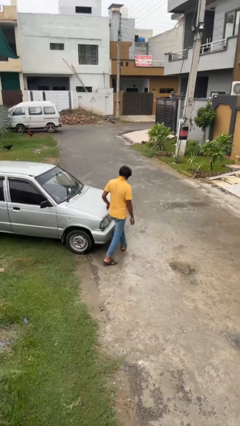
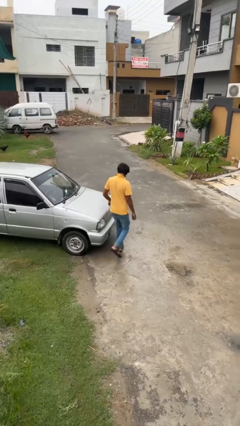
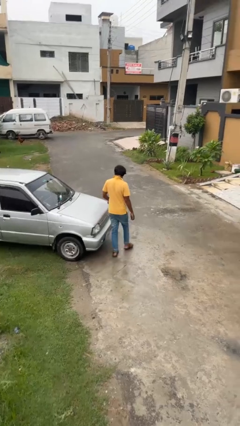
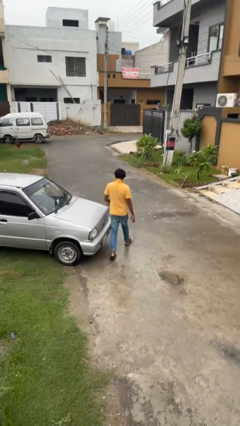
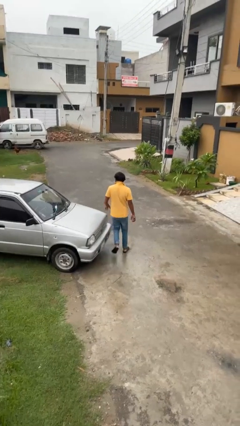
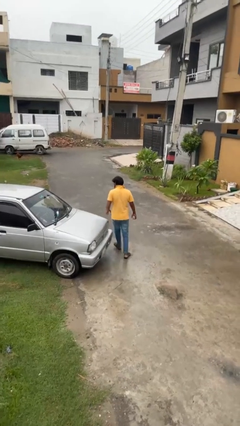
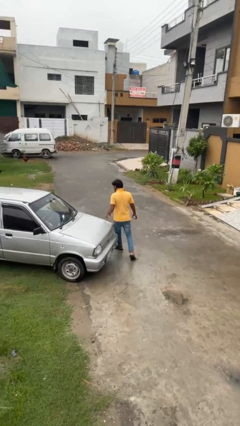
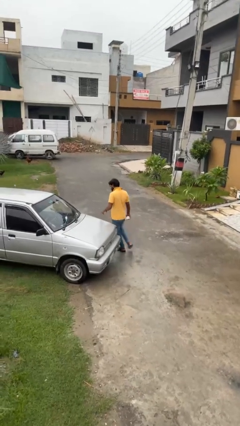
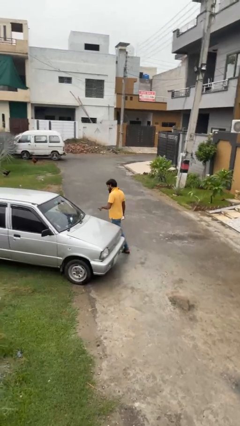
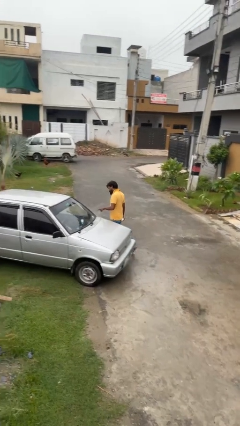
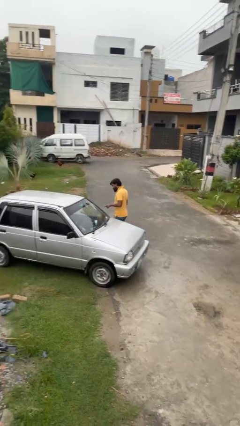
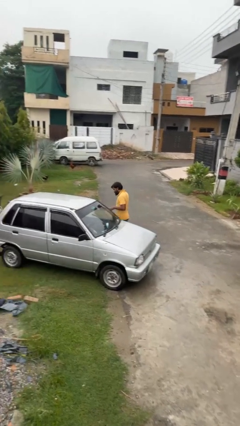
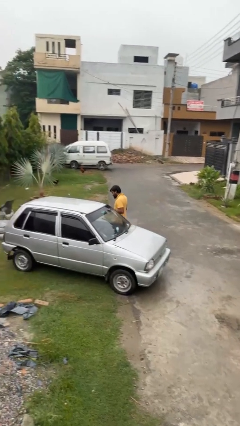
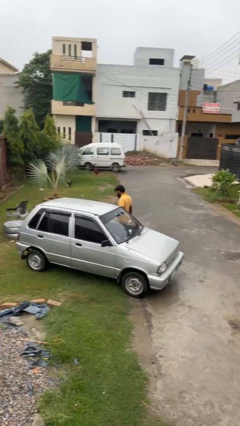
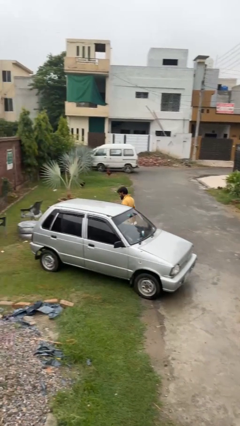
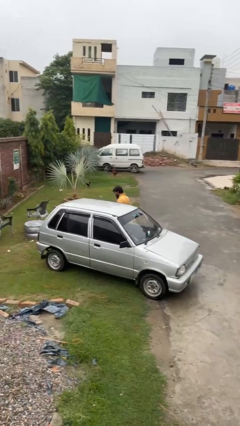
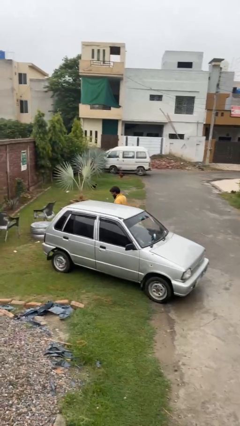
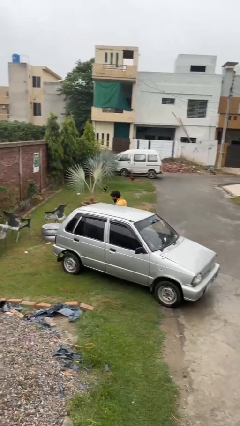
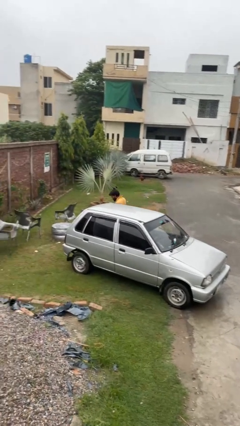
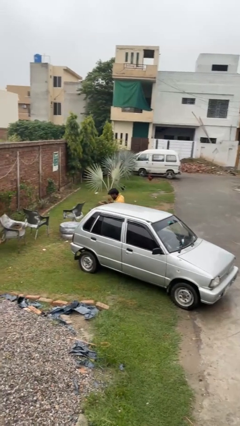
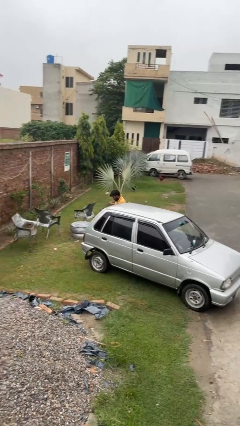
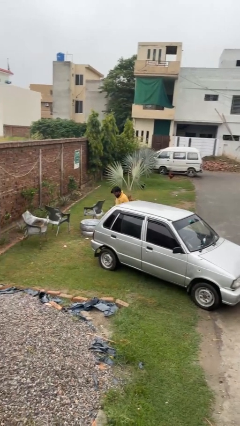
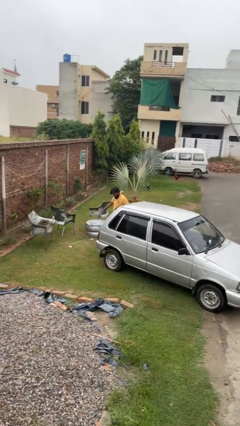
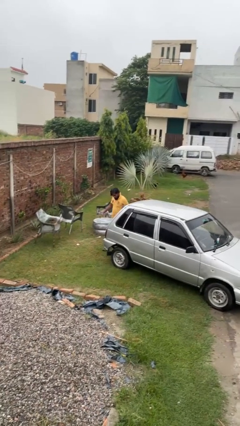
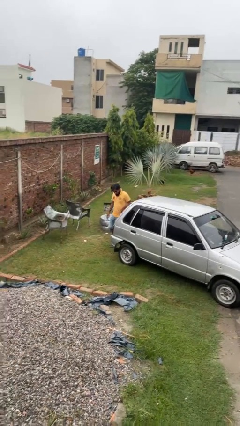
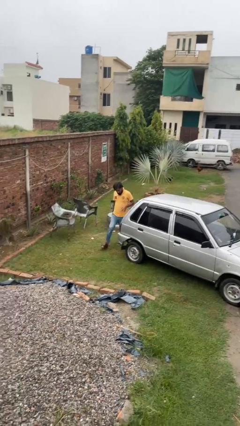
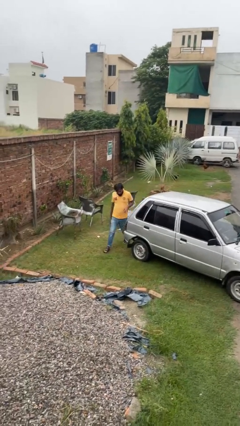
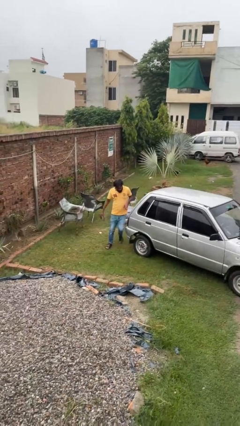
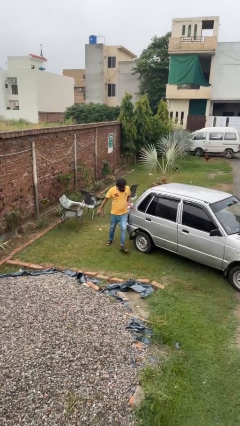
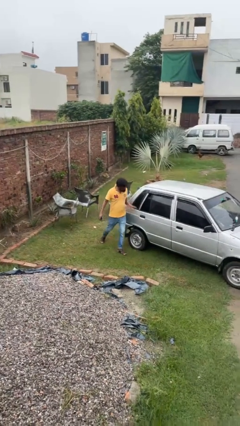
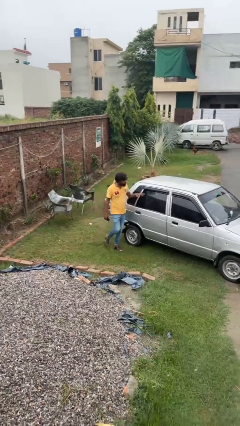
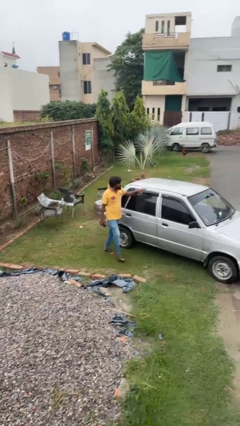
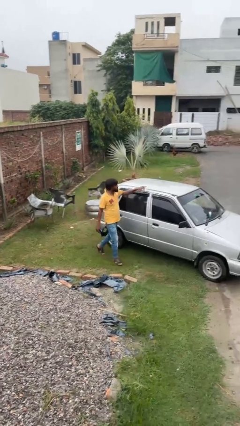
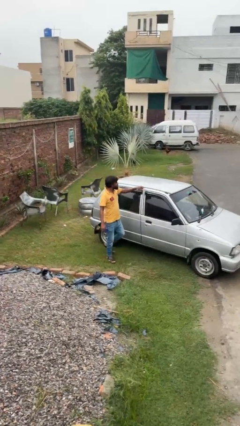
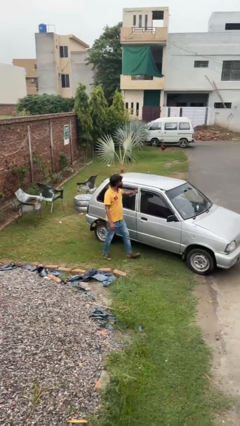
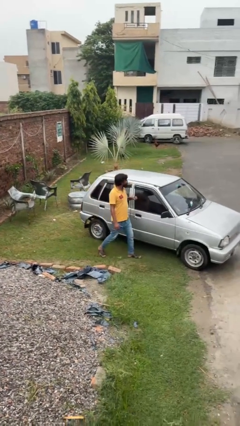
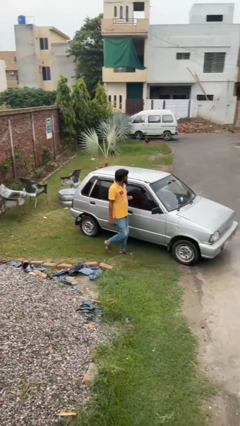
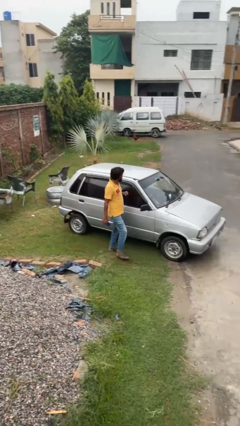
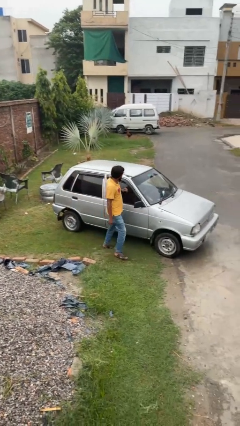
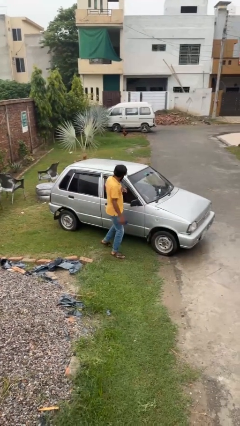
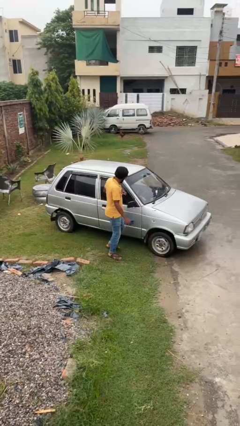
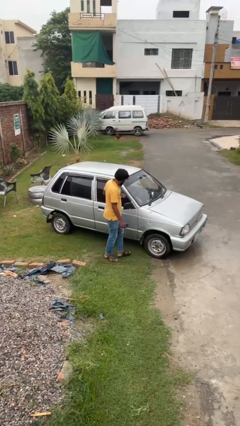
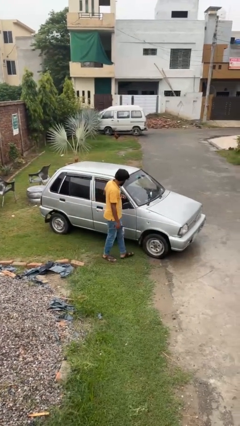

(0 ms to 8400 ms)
person walks around car

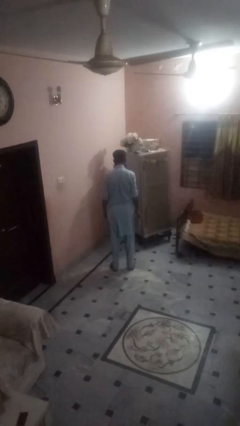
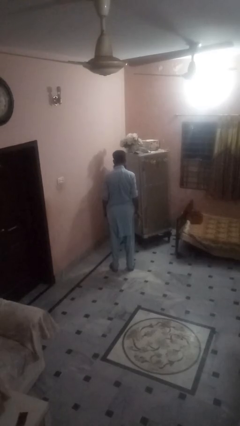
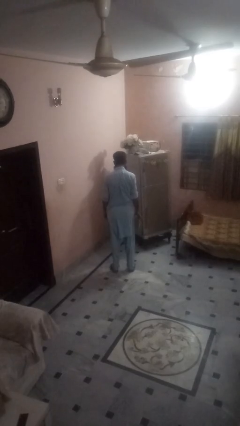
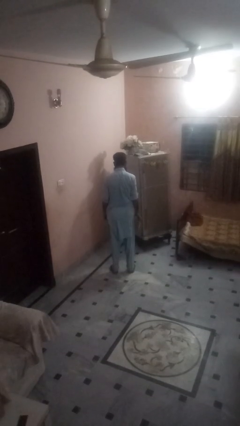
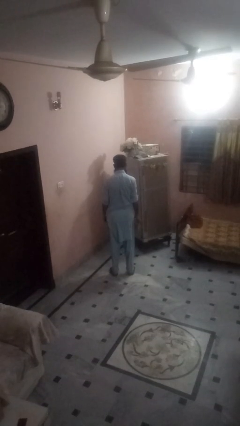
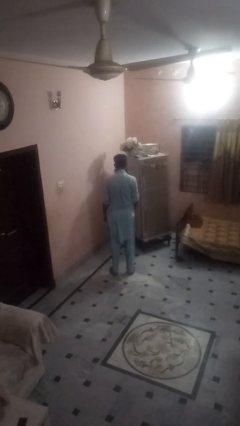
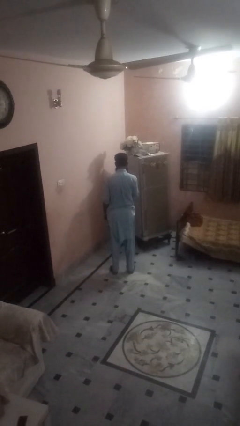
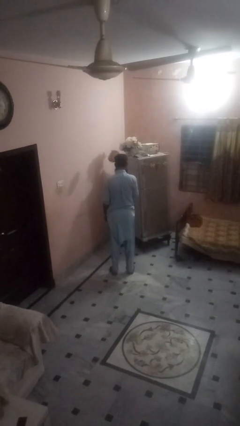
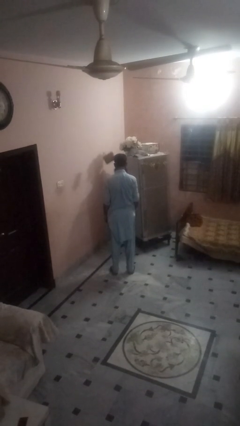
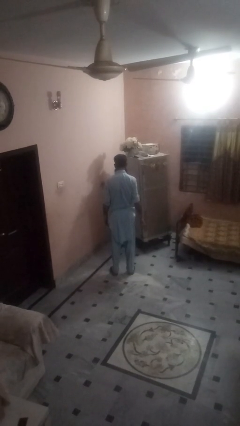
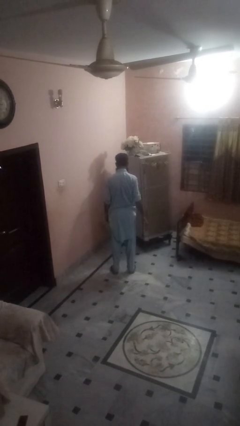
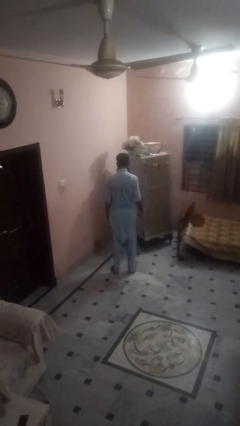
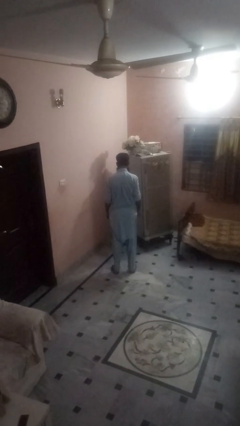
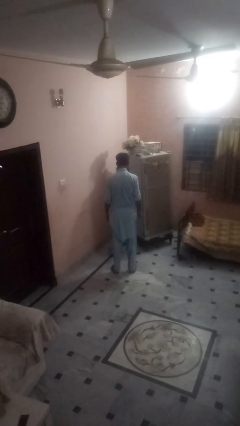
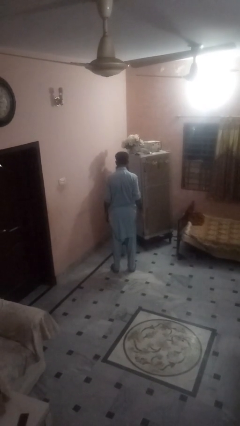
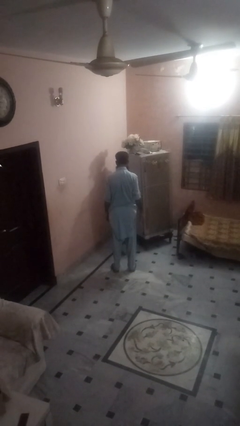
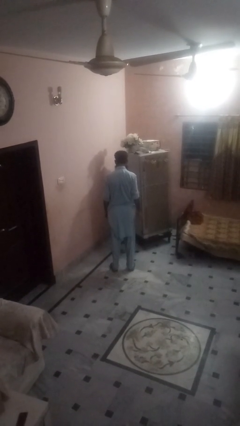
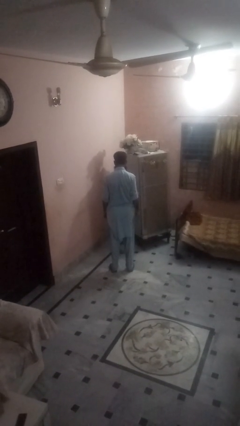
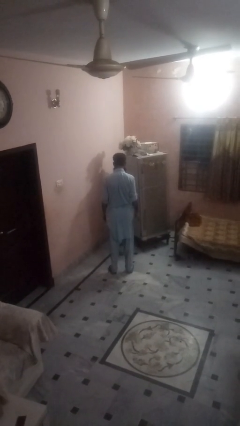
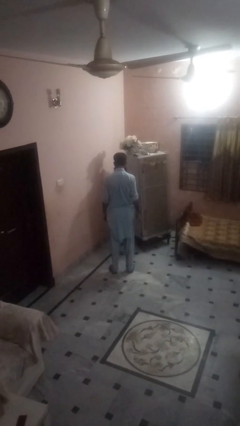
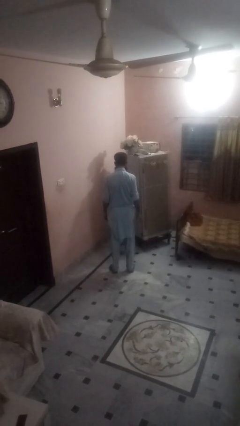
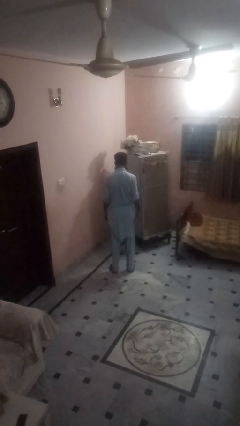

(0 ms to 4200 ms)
person throws object into air

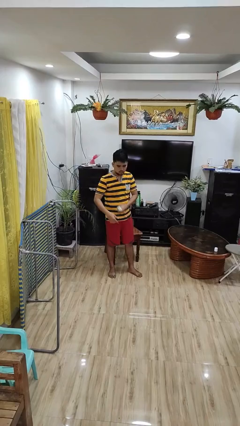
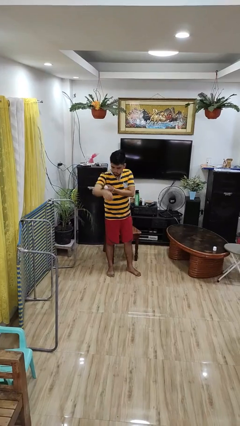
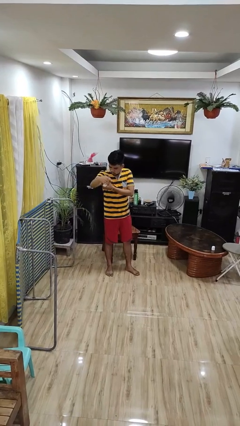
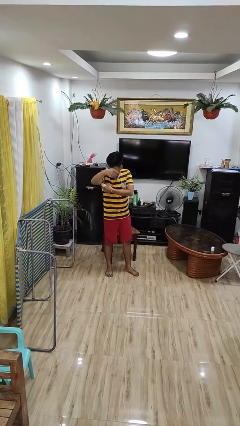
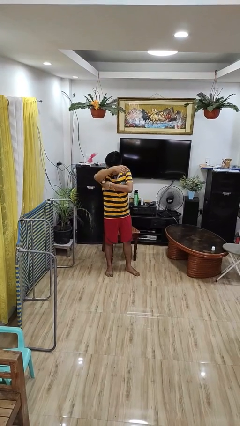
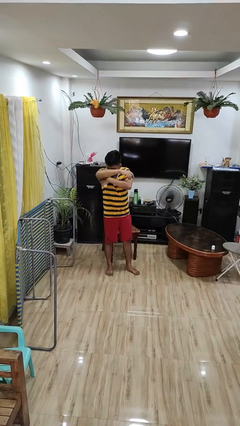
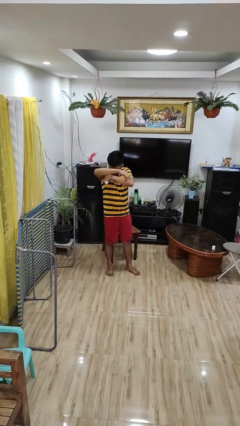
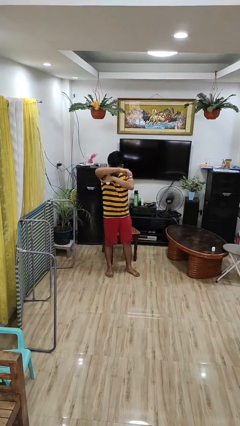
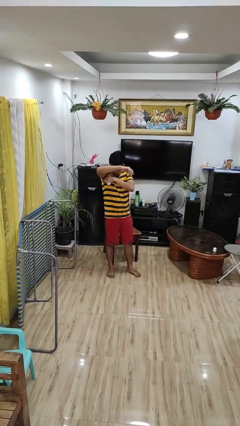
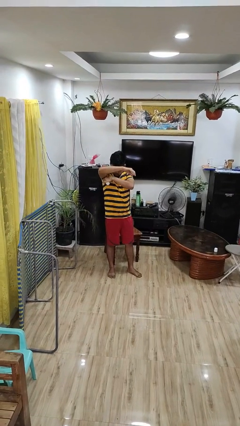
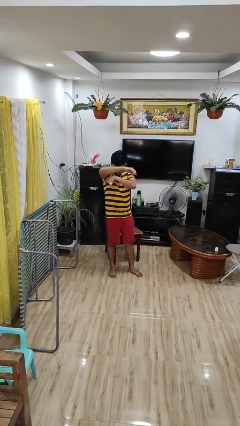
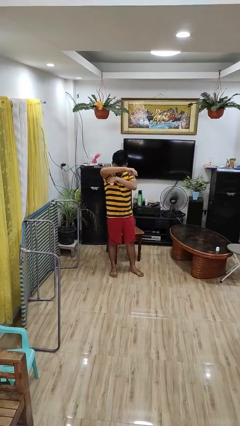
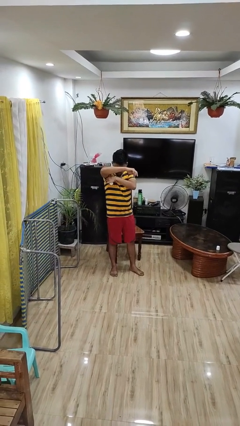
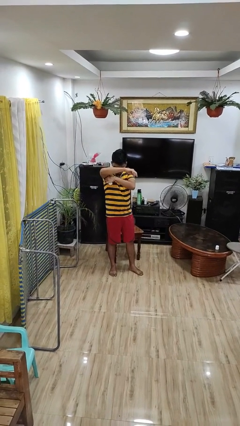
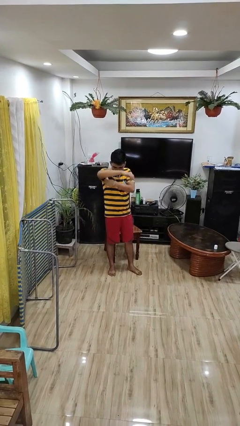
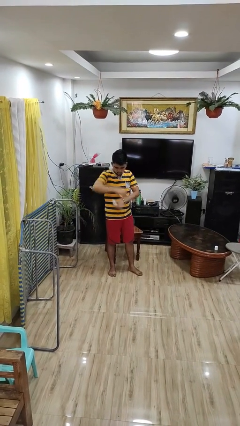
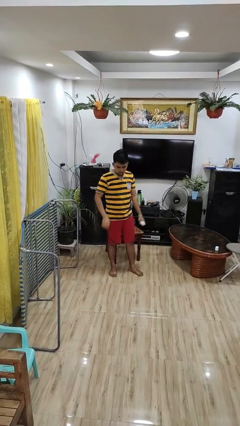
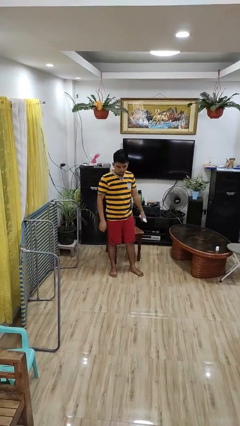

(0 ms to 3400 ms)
person applies deodorant

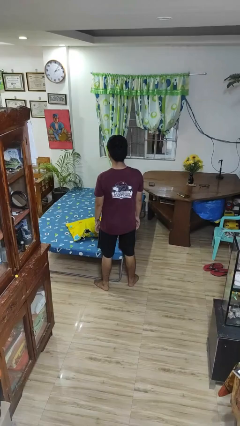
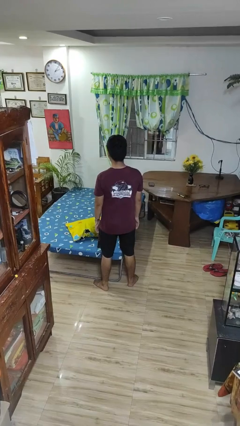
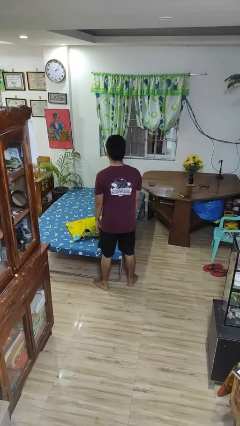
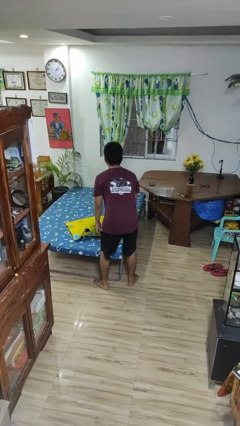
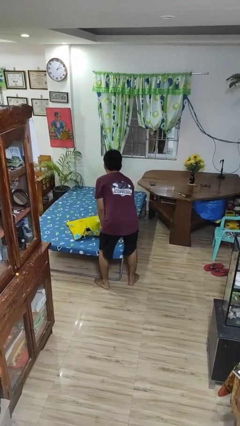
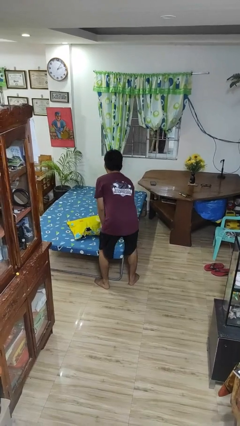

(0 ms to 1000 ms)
person picks up object from bed

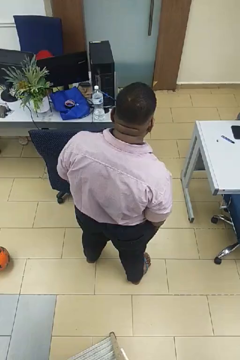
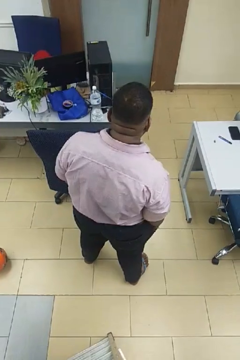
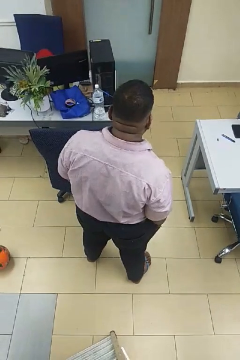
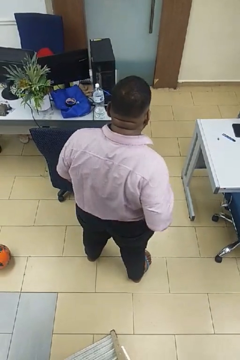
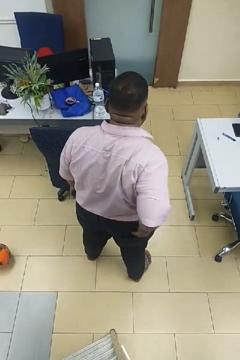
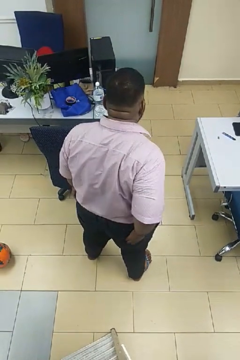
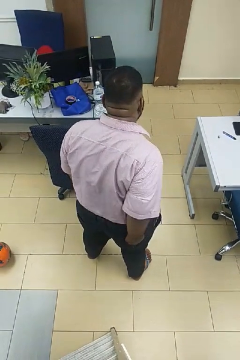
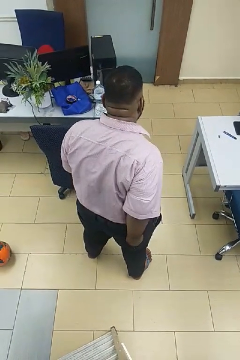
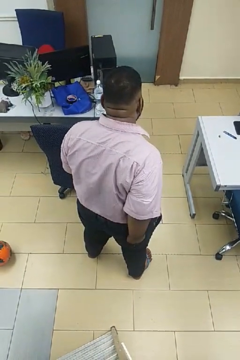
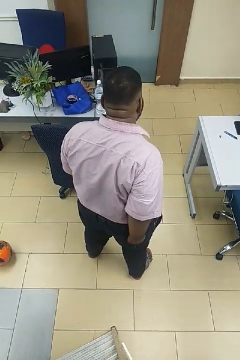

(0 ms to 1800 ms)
person puts hands in back pockets
